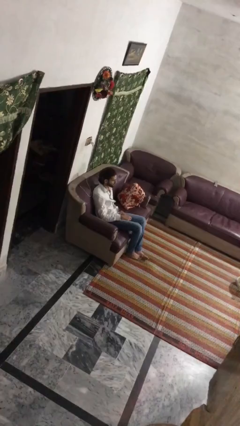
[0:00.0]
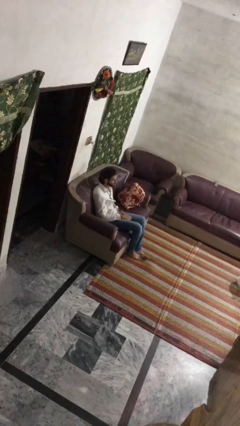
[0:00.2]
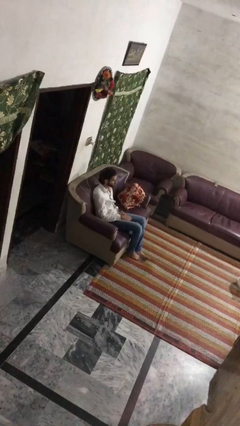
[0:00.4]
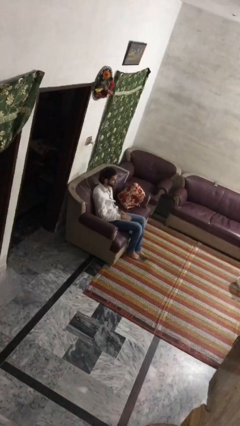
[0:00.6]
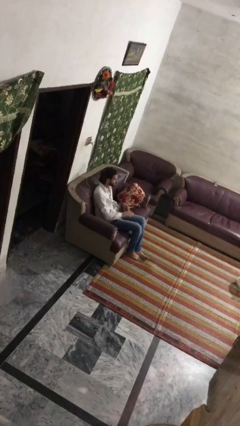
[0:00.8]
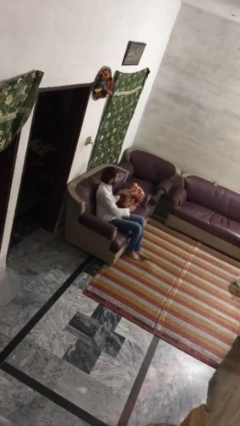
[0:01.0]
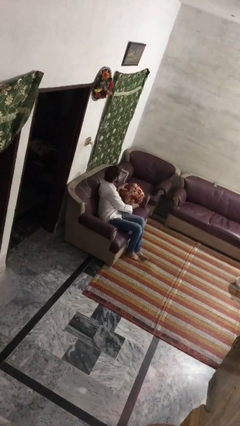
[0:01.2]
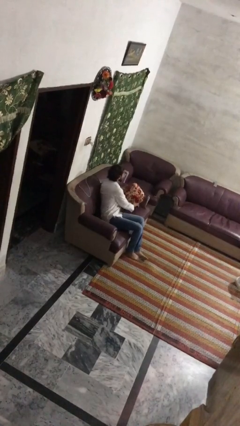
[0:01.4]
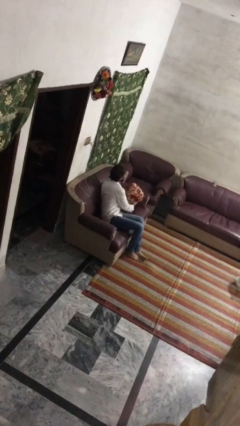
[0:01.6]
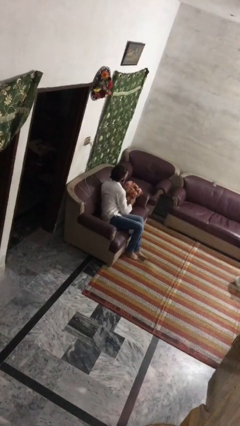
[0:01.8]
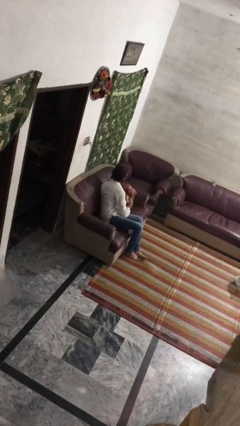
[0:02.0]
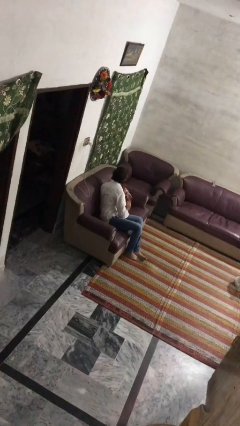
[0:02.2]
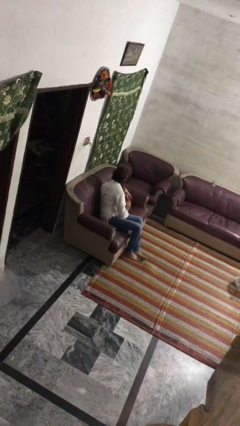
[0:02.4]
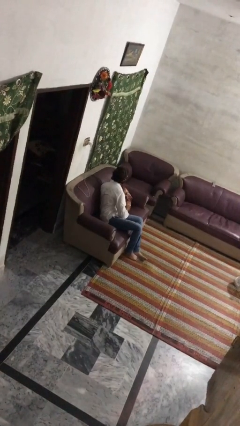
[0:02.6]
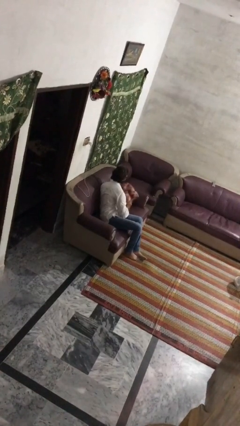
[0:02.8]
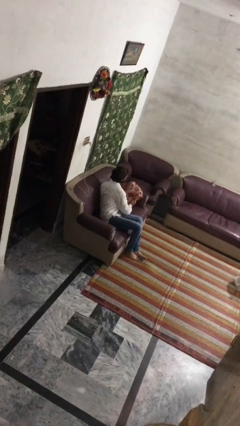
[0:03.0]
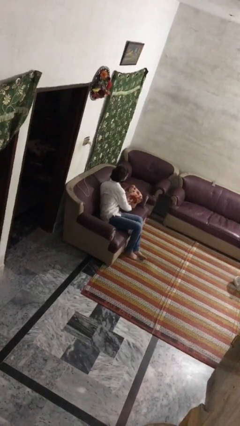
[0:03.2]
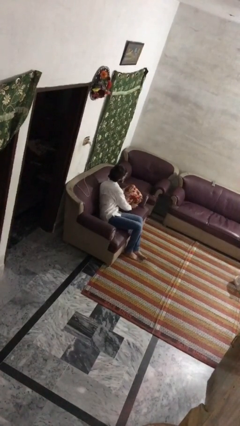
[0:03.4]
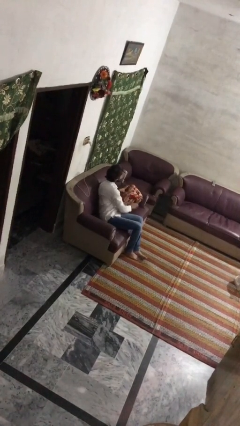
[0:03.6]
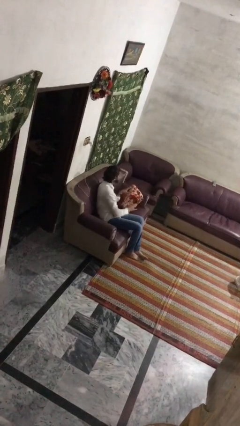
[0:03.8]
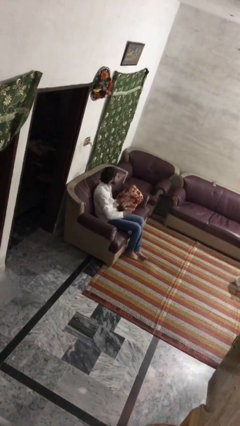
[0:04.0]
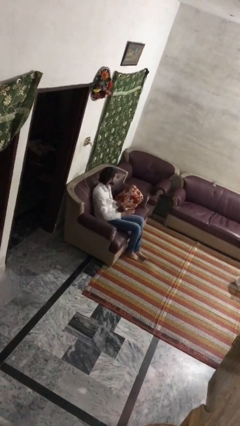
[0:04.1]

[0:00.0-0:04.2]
person searches in couch

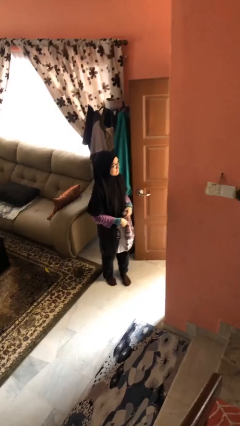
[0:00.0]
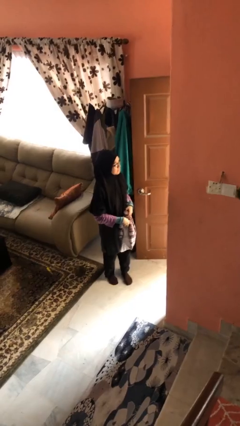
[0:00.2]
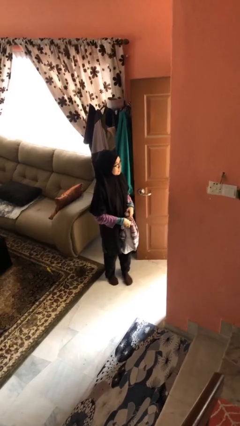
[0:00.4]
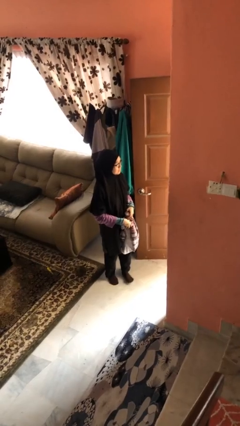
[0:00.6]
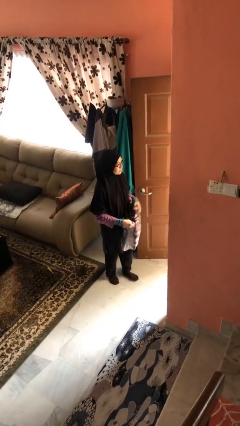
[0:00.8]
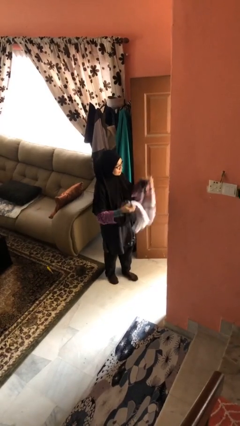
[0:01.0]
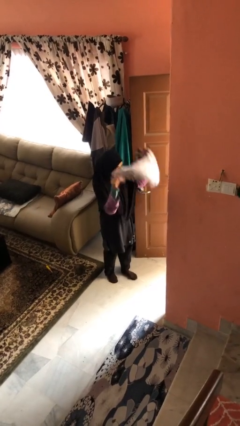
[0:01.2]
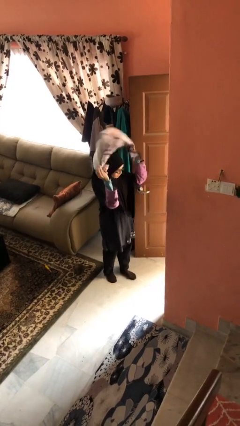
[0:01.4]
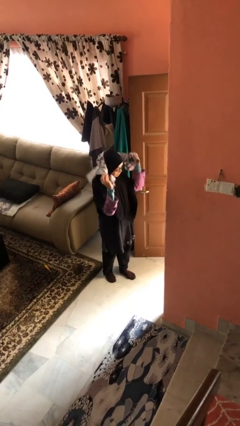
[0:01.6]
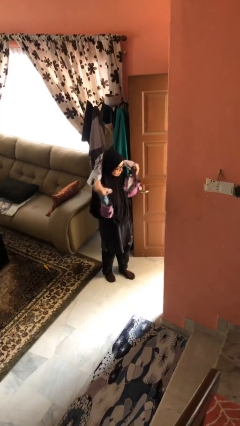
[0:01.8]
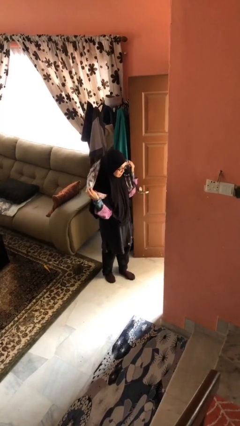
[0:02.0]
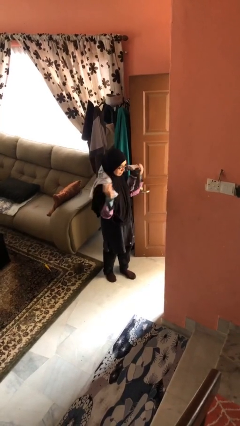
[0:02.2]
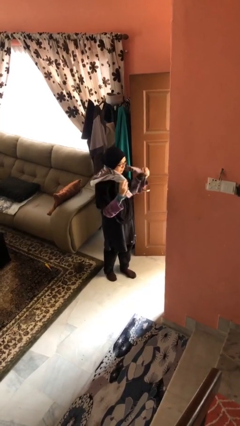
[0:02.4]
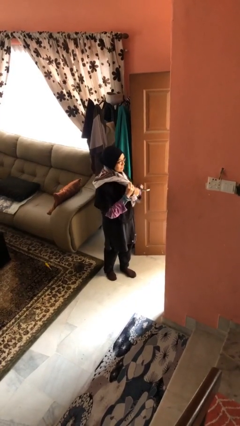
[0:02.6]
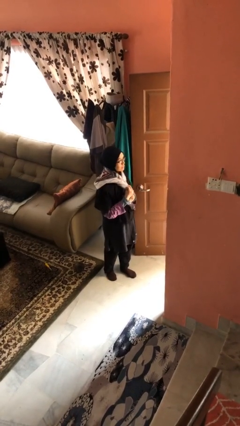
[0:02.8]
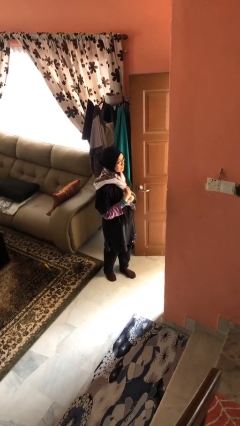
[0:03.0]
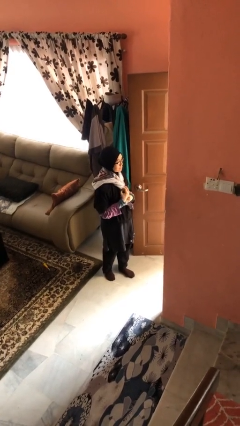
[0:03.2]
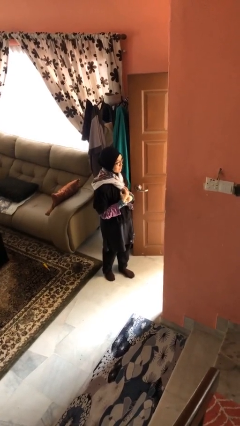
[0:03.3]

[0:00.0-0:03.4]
person puts on scarf

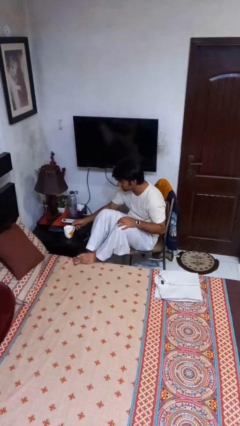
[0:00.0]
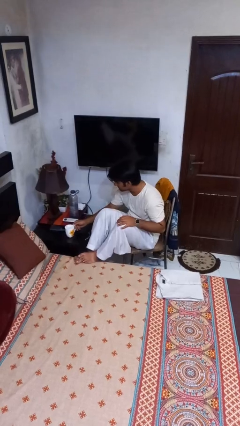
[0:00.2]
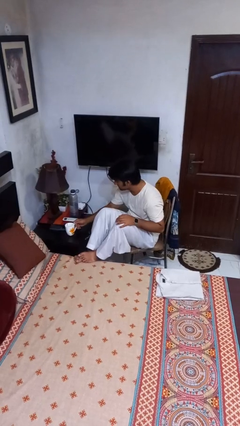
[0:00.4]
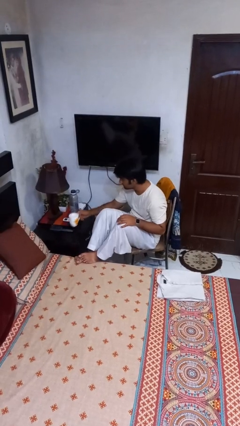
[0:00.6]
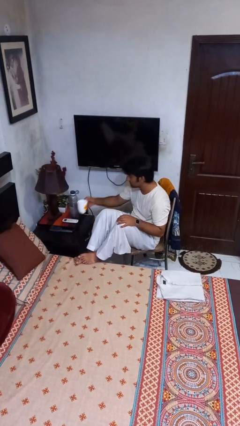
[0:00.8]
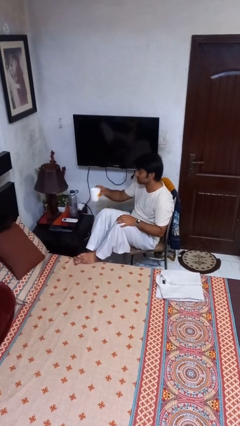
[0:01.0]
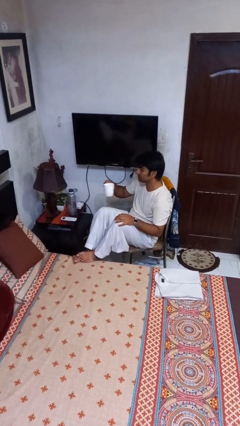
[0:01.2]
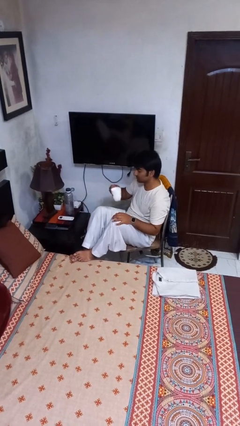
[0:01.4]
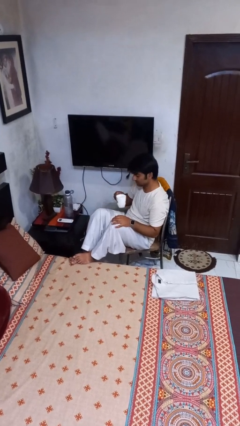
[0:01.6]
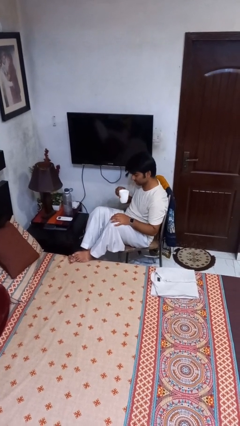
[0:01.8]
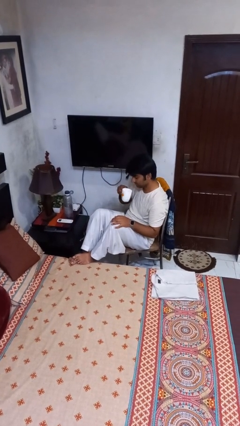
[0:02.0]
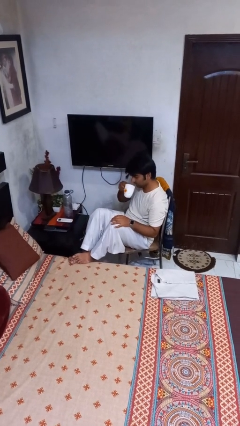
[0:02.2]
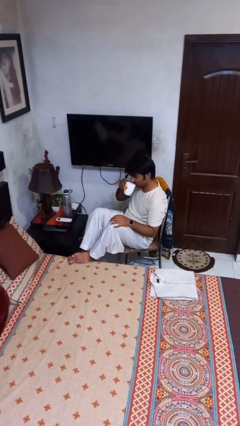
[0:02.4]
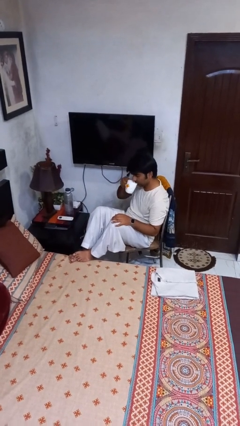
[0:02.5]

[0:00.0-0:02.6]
person picks up object from table

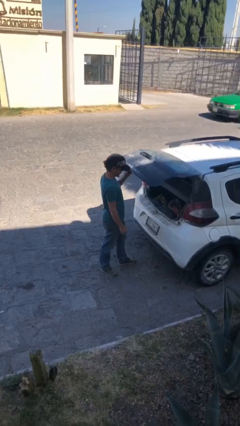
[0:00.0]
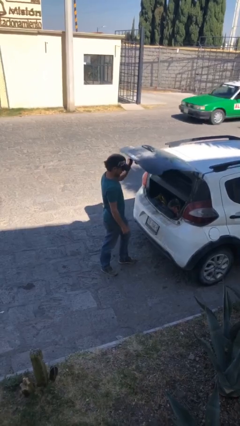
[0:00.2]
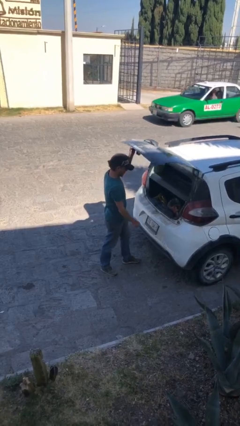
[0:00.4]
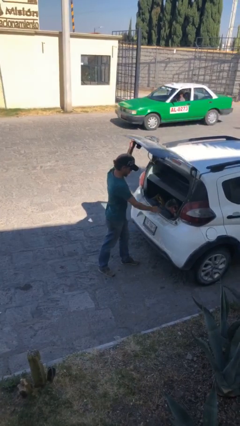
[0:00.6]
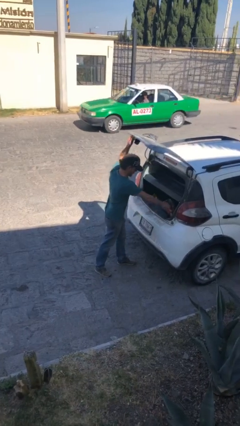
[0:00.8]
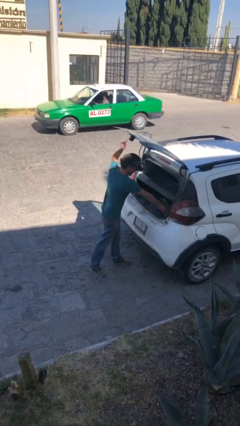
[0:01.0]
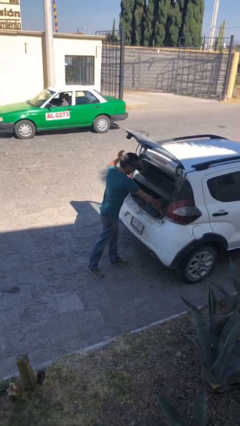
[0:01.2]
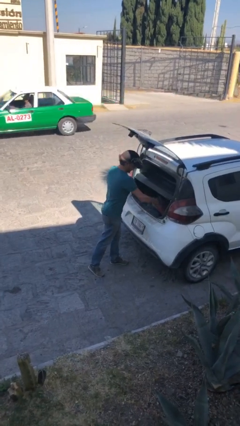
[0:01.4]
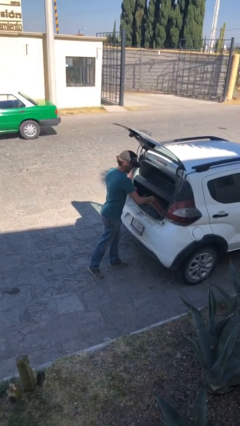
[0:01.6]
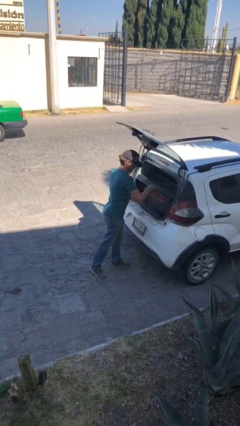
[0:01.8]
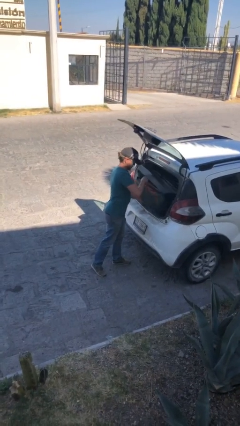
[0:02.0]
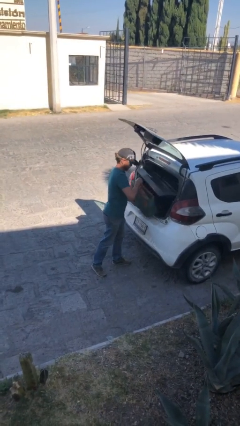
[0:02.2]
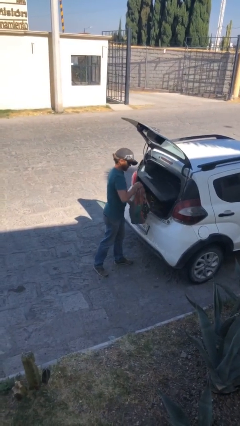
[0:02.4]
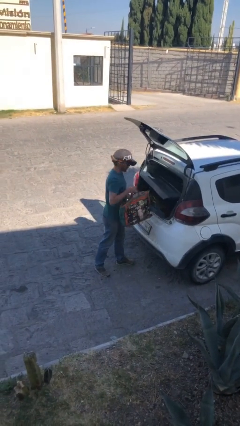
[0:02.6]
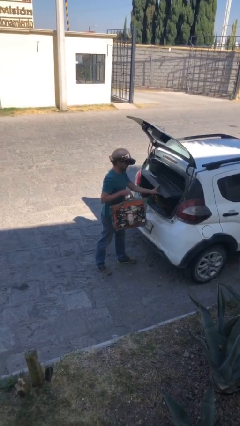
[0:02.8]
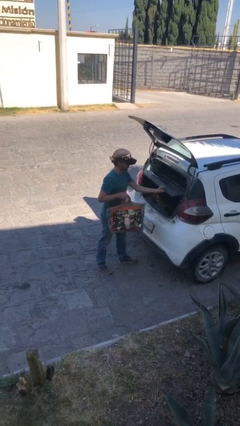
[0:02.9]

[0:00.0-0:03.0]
person unloads car

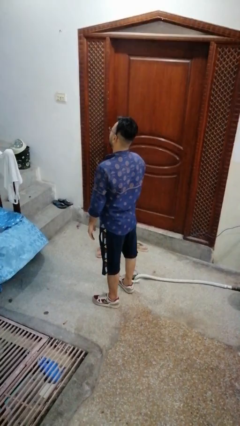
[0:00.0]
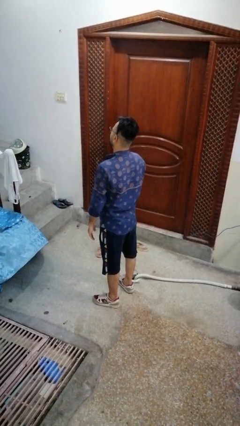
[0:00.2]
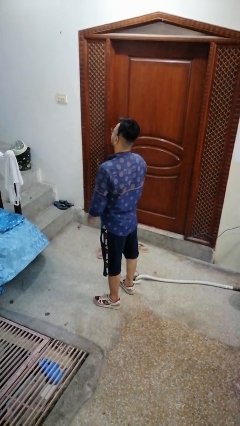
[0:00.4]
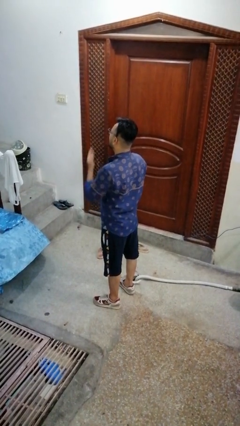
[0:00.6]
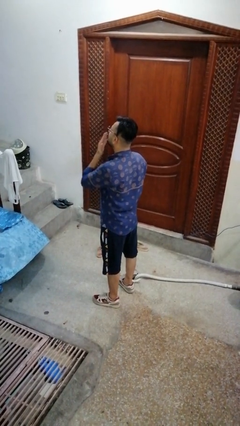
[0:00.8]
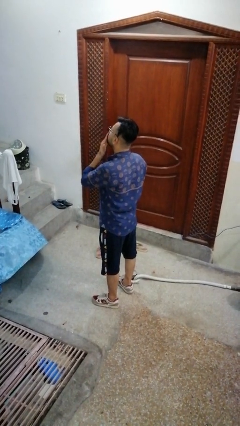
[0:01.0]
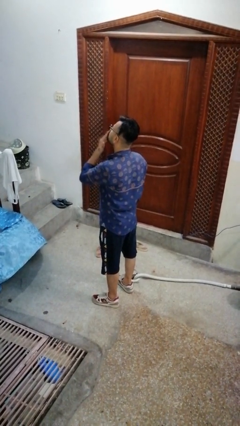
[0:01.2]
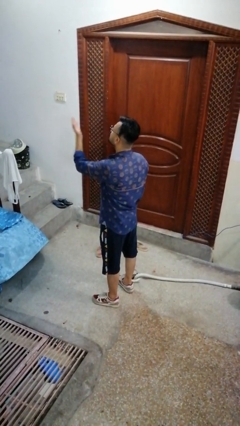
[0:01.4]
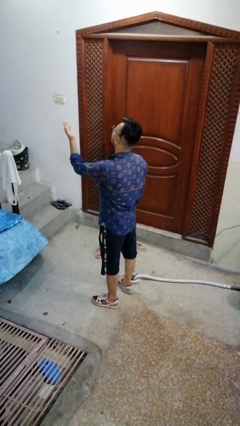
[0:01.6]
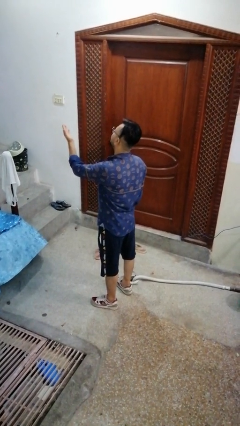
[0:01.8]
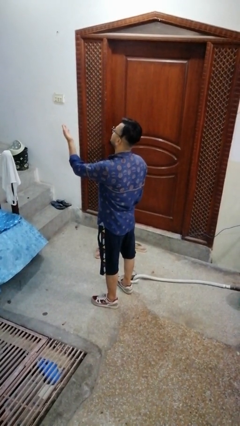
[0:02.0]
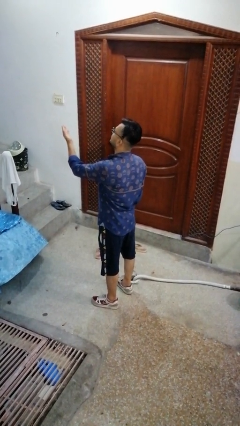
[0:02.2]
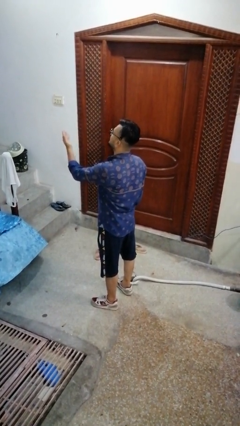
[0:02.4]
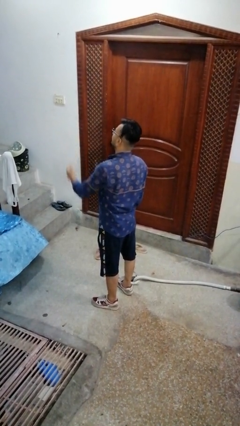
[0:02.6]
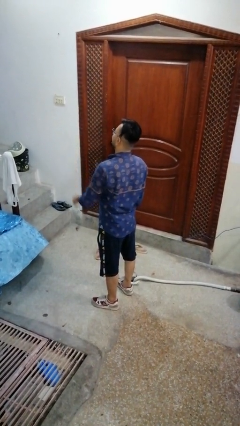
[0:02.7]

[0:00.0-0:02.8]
person gestures blow kiss

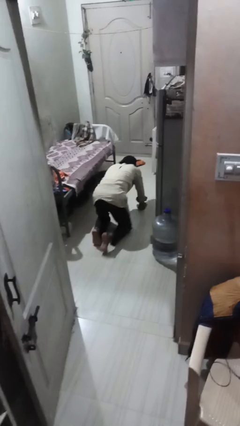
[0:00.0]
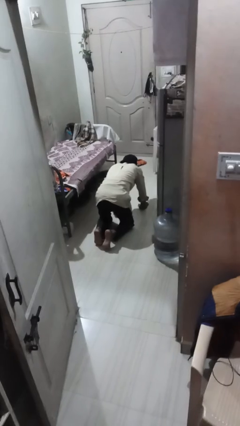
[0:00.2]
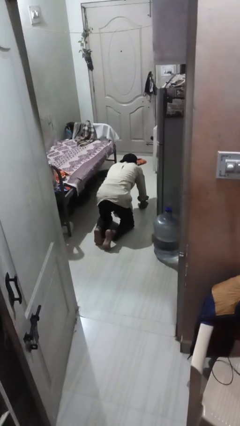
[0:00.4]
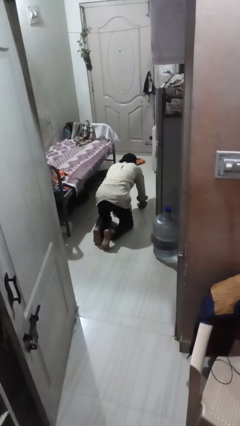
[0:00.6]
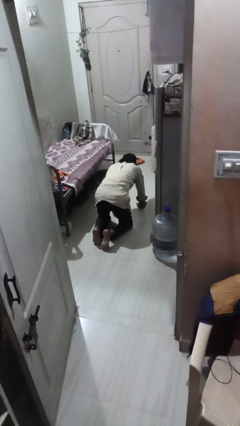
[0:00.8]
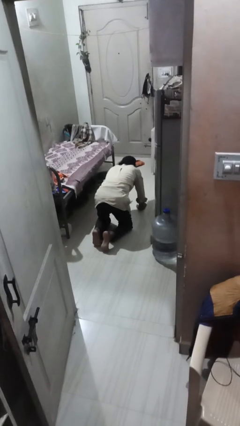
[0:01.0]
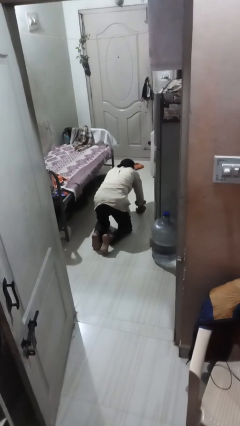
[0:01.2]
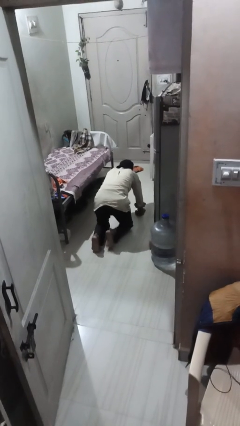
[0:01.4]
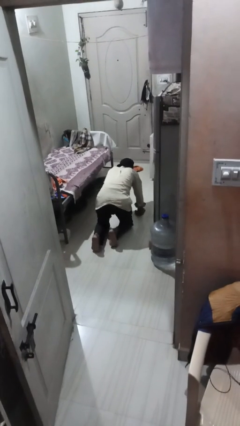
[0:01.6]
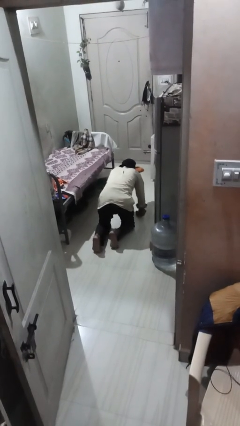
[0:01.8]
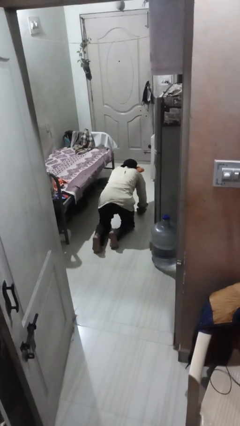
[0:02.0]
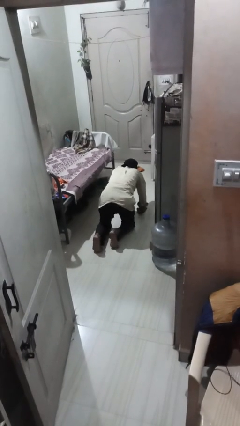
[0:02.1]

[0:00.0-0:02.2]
person crawls
